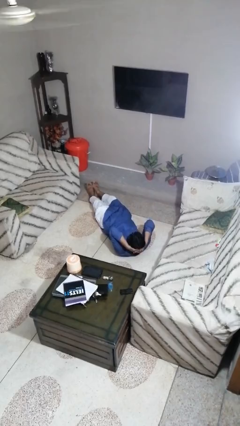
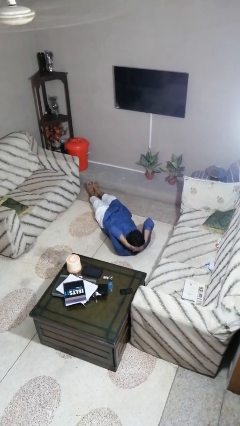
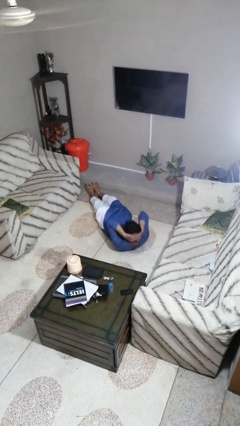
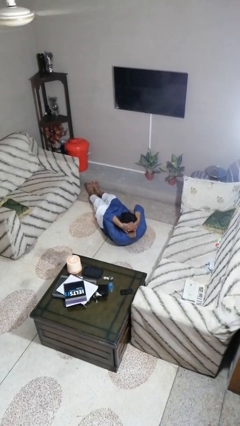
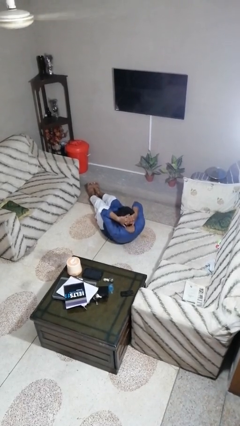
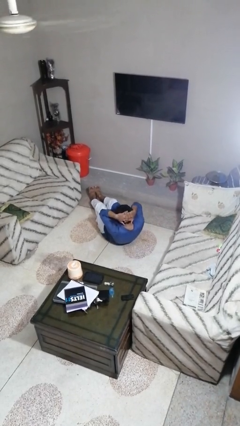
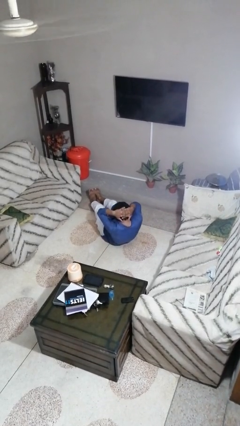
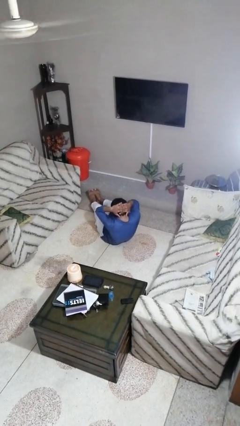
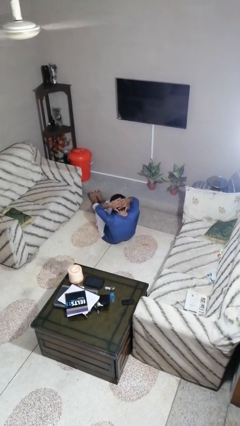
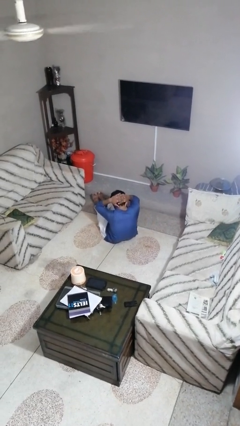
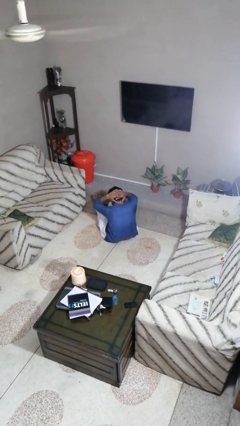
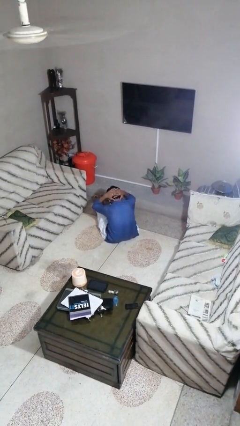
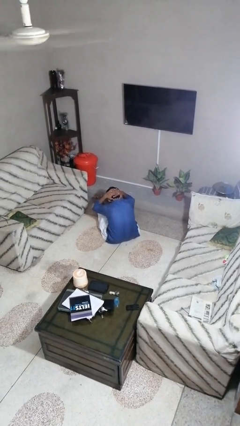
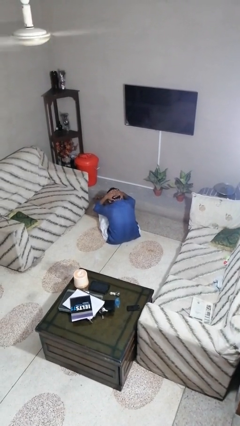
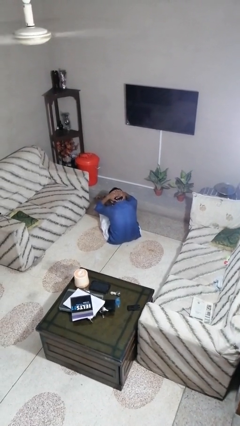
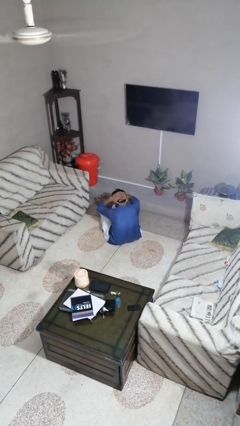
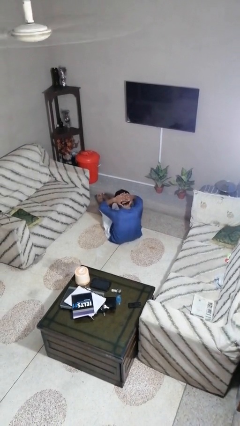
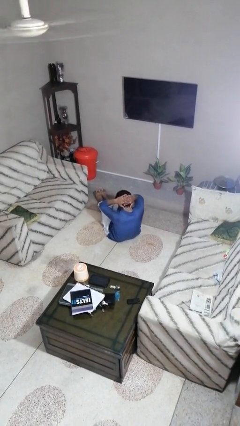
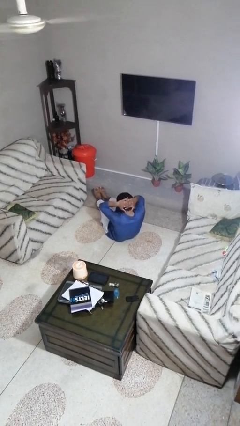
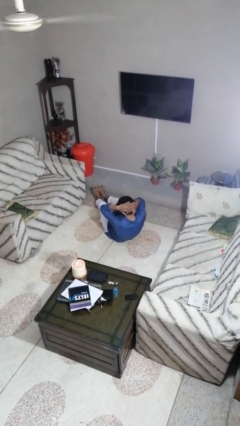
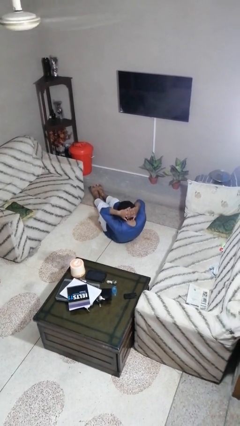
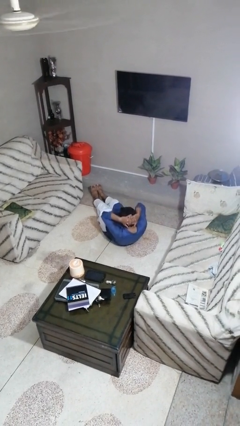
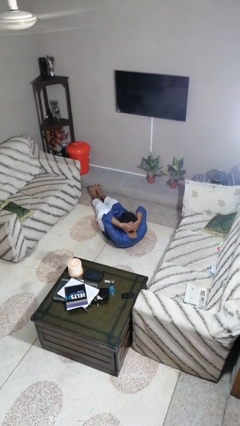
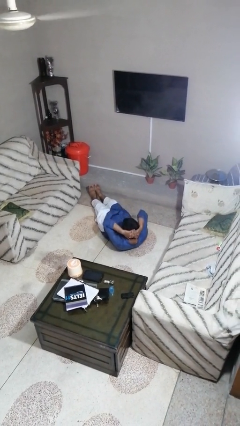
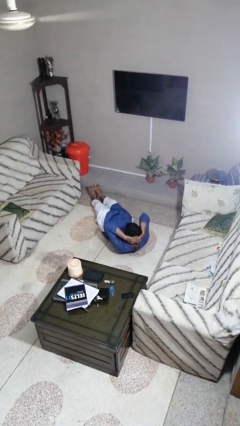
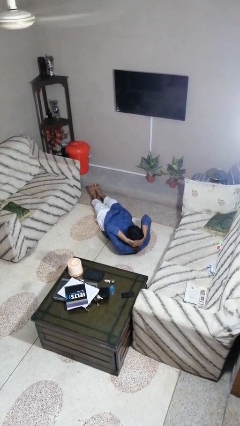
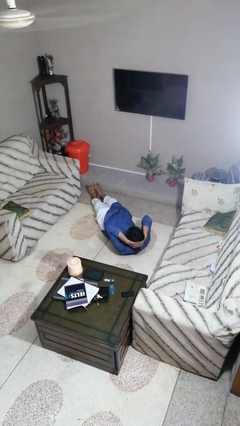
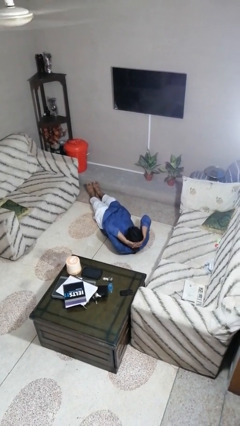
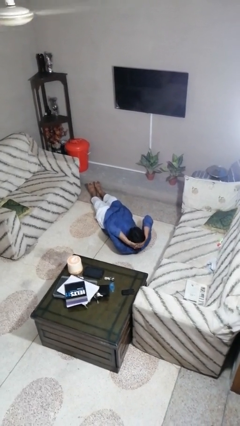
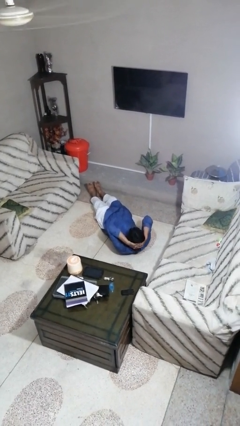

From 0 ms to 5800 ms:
person exercises with situp

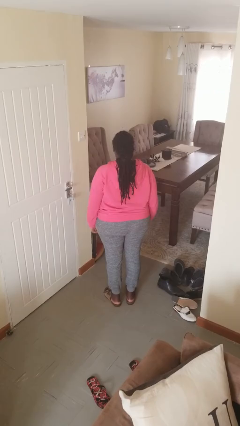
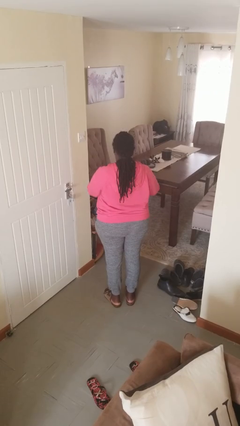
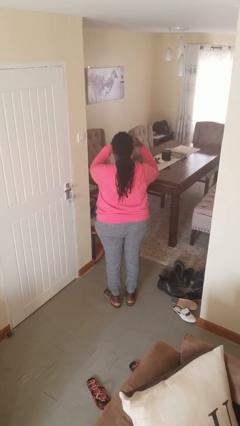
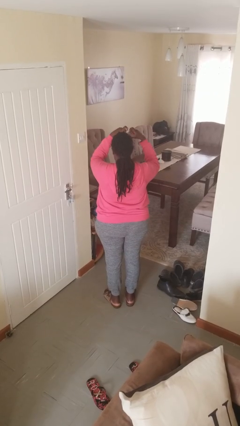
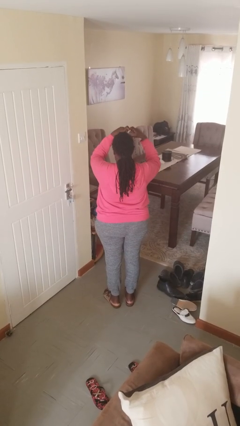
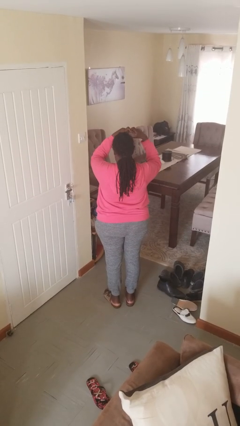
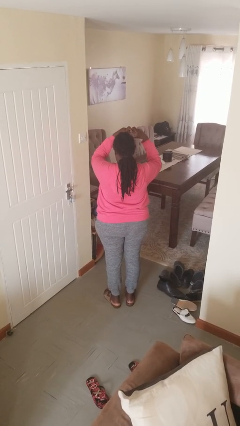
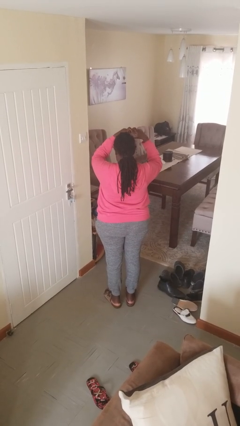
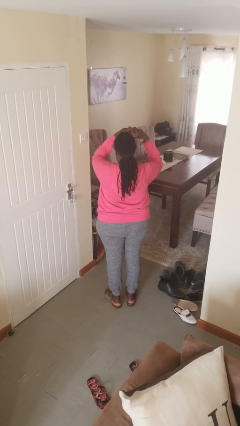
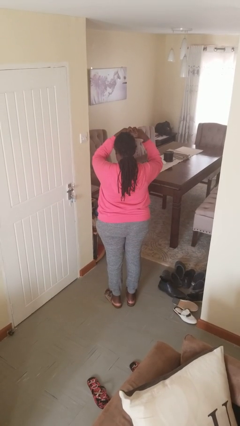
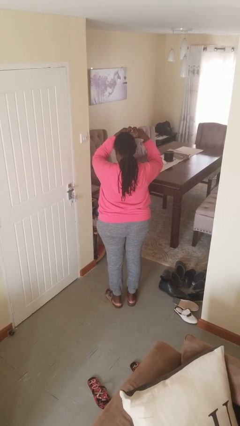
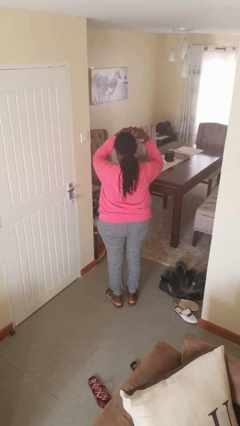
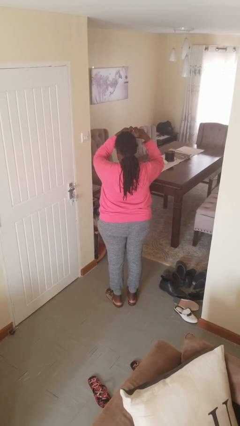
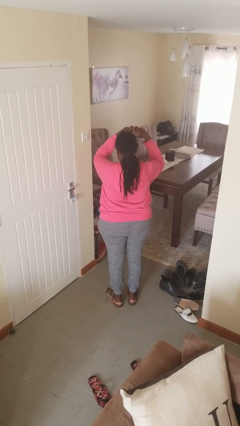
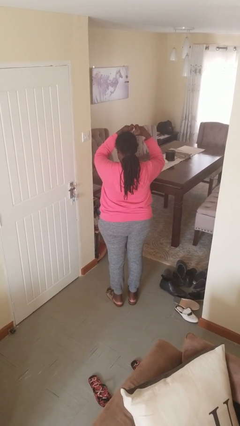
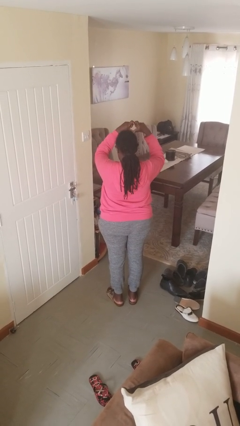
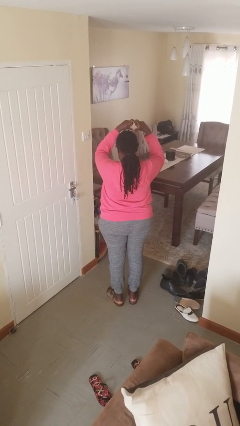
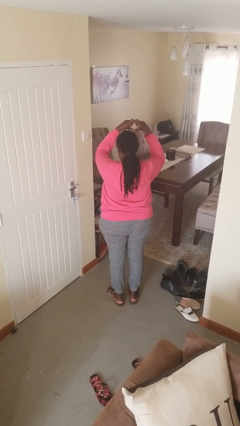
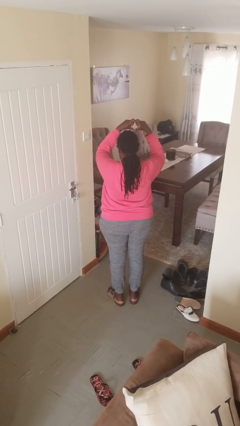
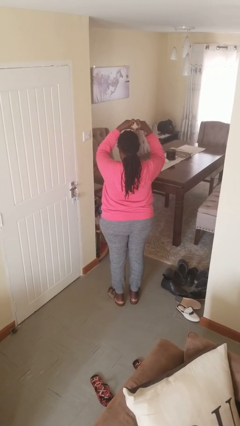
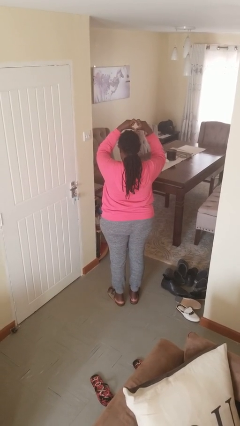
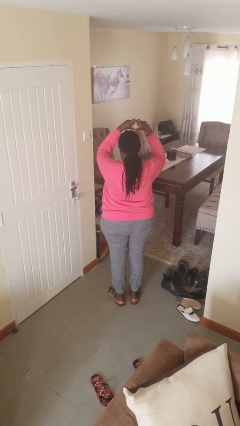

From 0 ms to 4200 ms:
person gestures heart

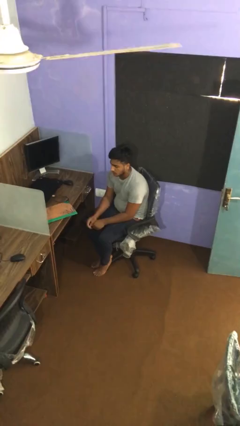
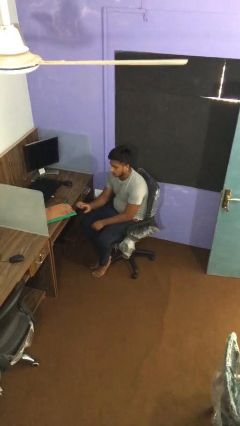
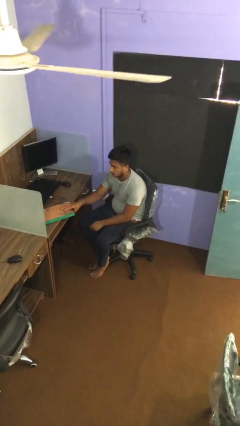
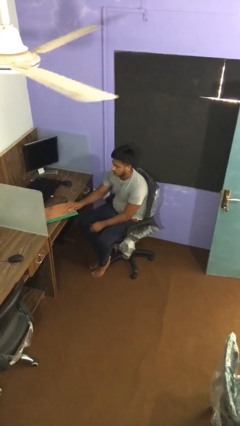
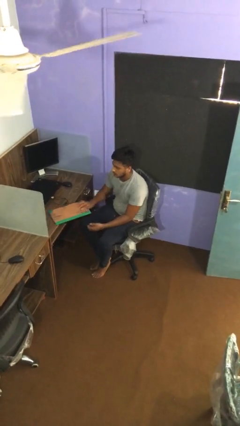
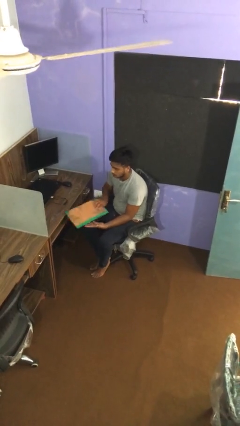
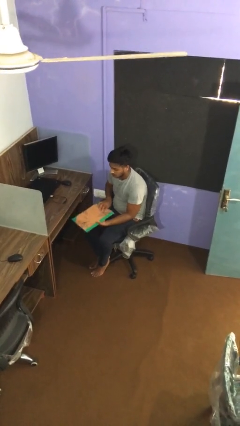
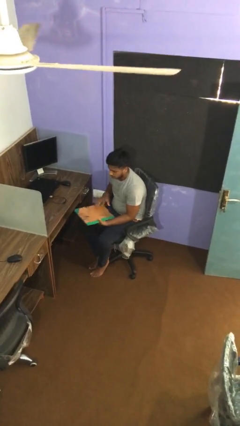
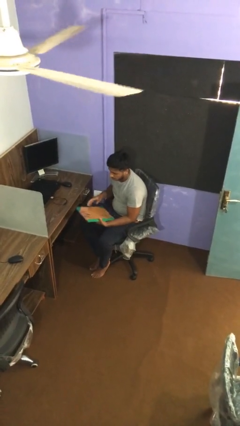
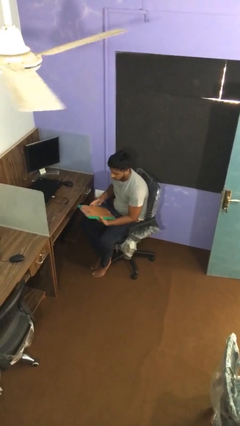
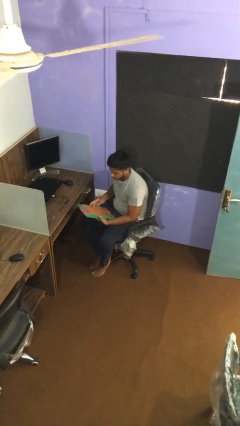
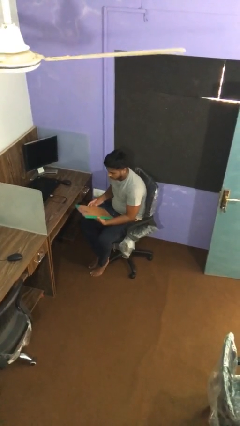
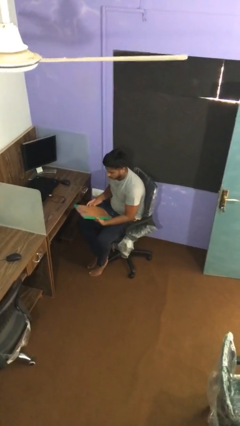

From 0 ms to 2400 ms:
person picks up object from table

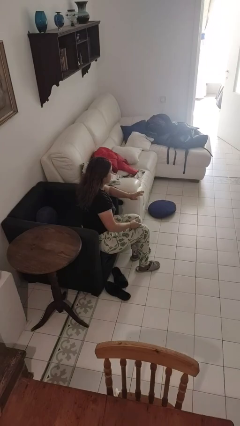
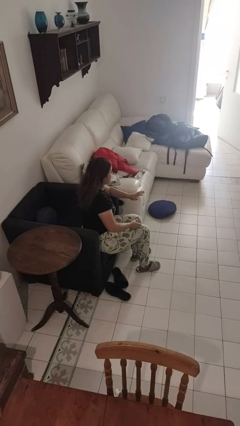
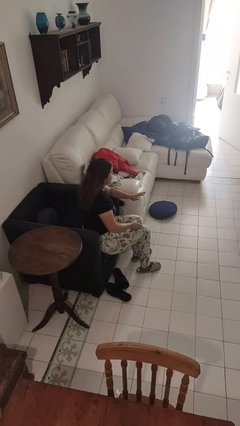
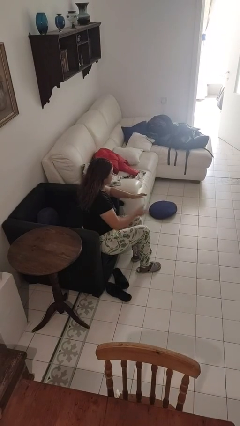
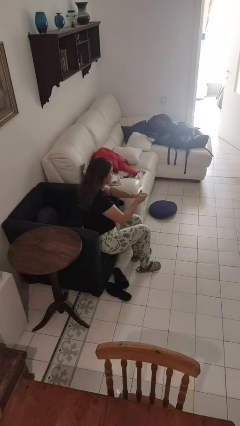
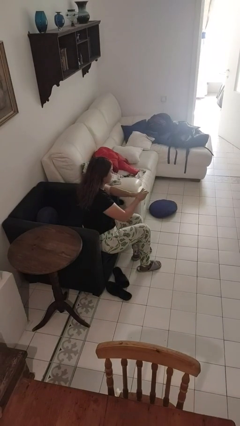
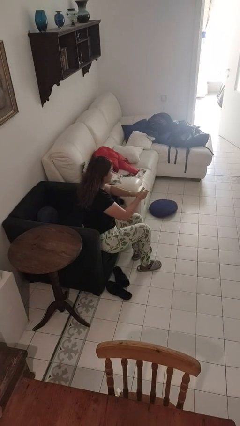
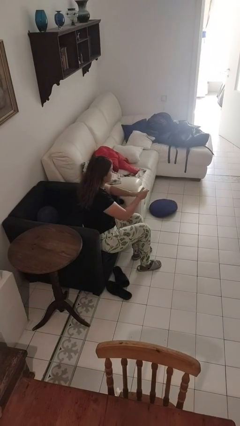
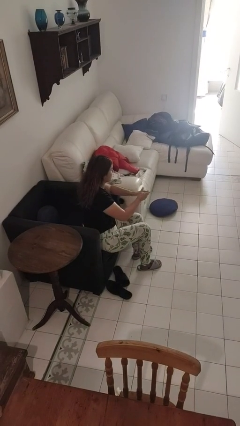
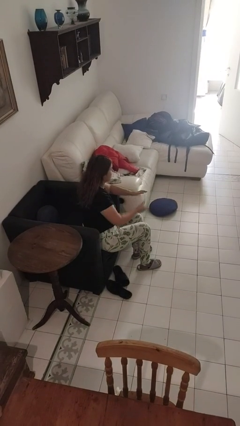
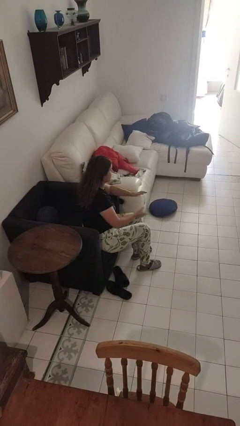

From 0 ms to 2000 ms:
person clips fingernails

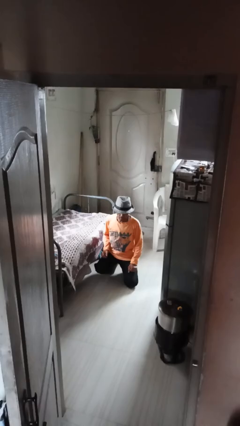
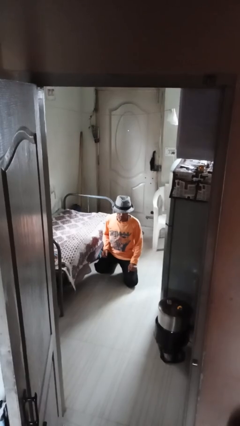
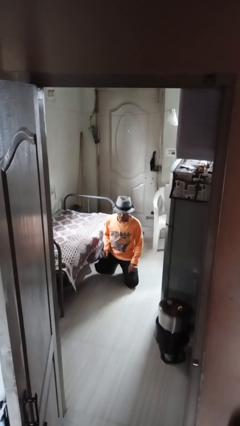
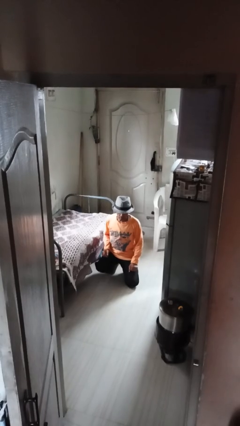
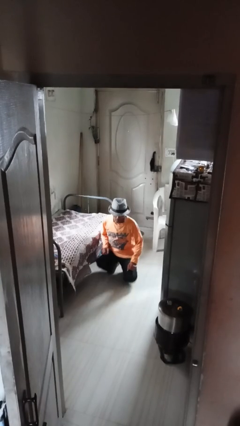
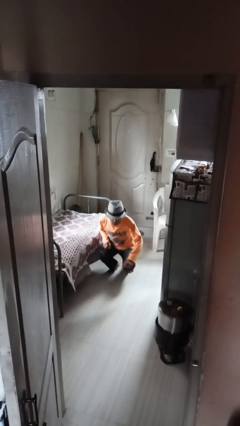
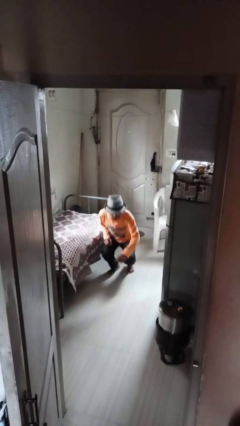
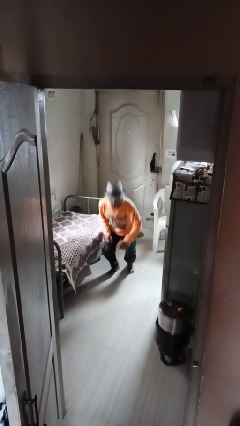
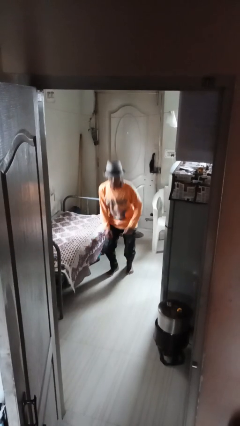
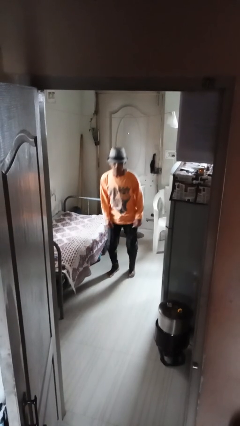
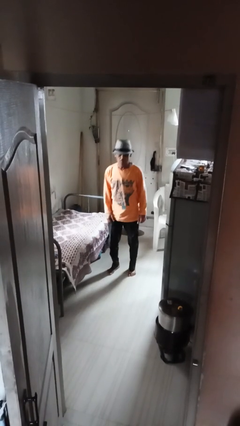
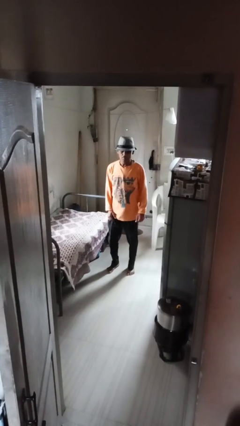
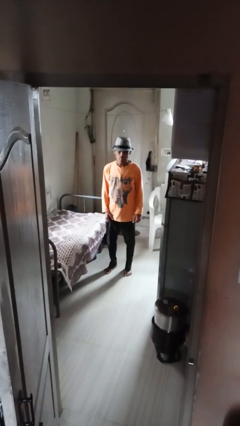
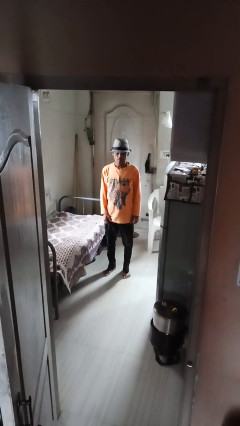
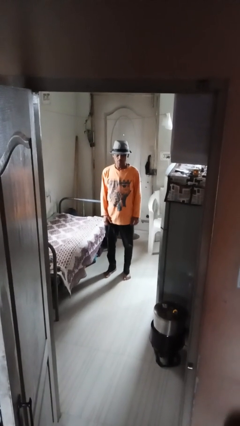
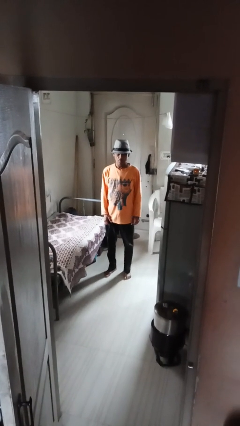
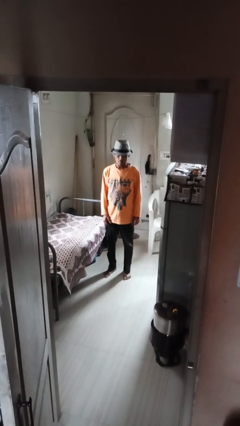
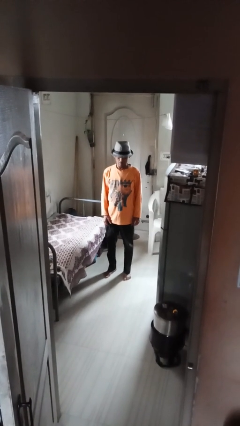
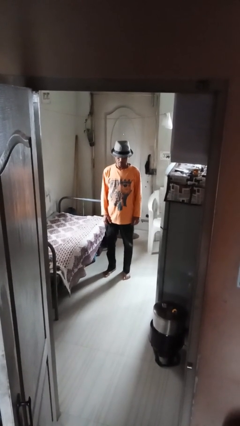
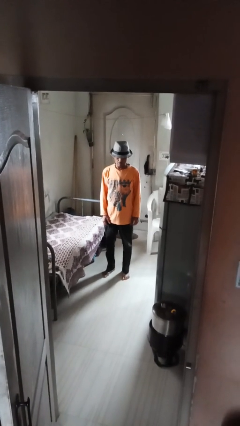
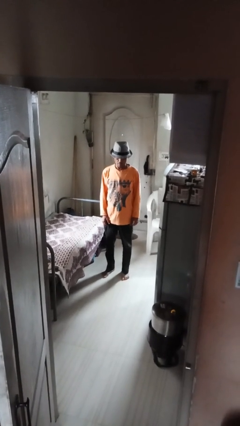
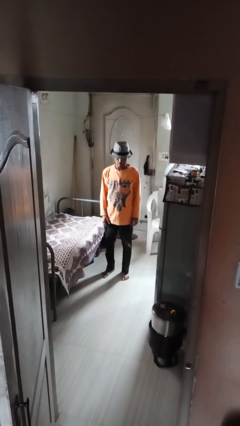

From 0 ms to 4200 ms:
person stands up from floor
